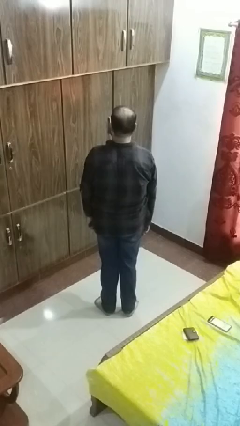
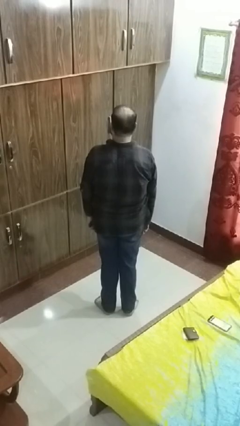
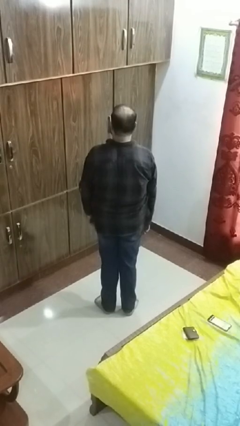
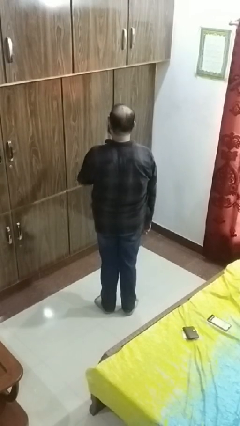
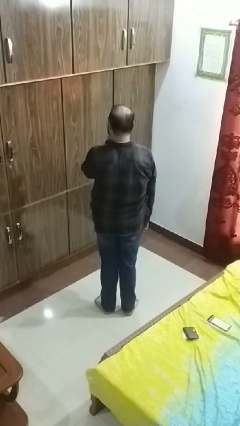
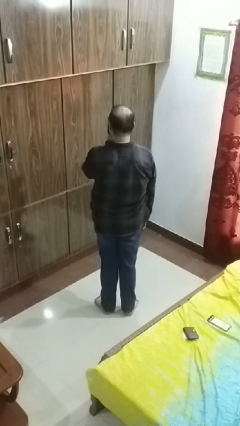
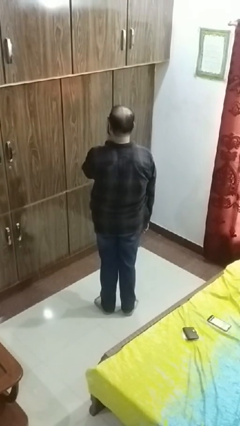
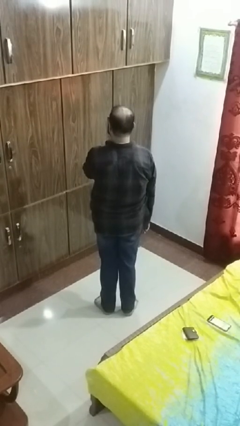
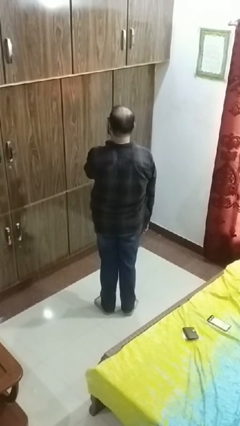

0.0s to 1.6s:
person gestures be quiet

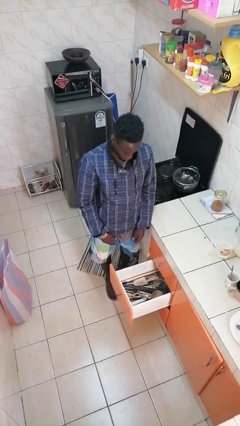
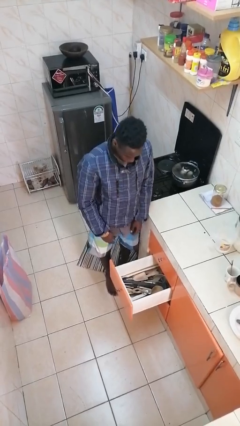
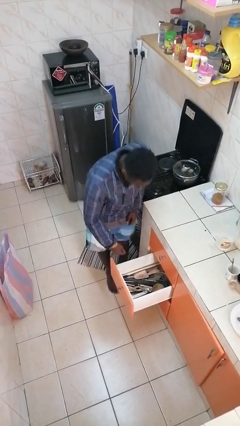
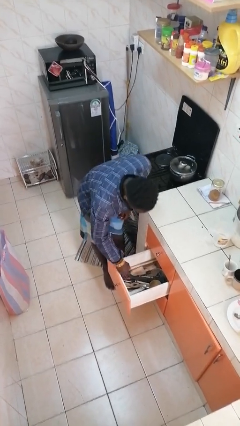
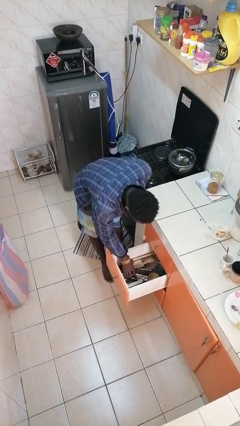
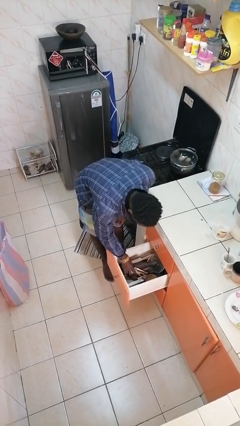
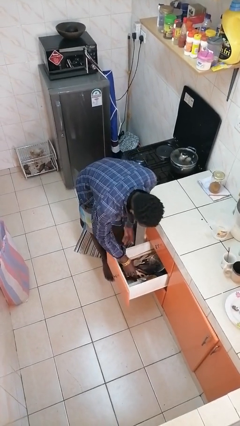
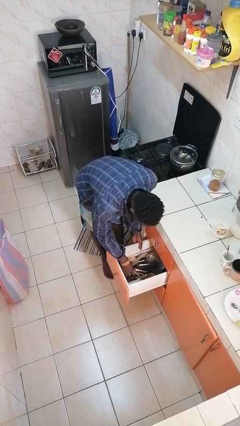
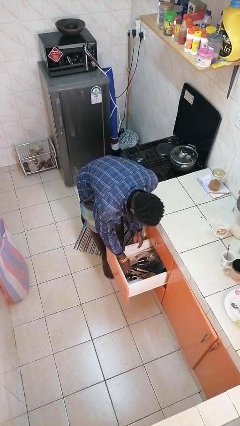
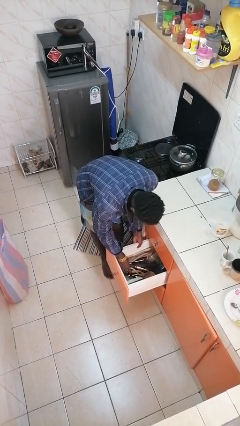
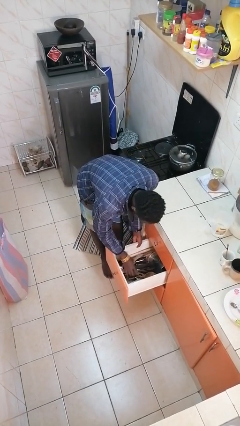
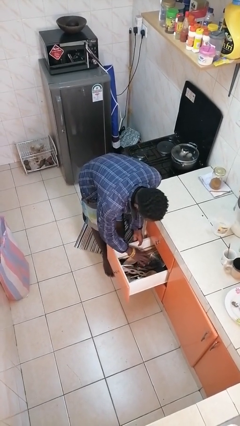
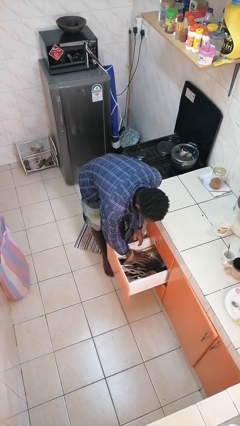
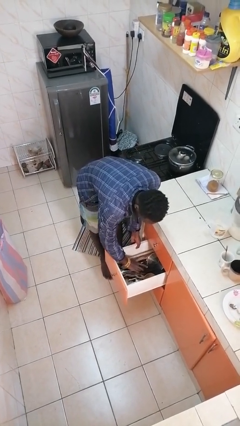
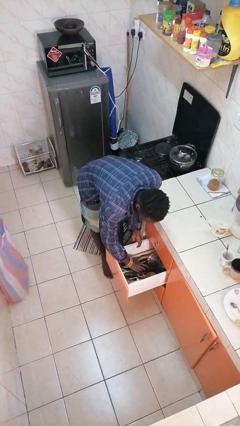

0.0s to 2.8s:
person searches in kitchen drawer

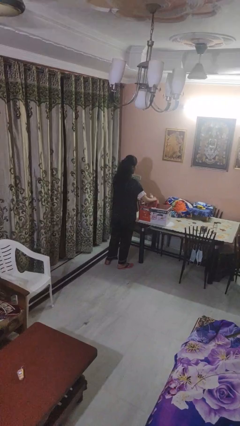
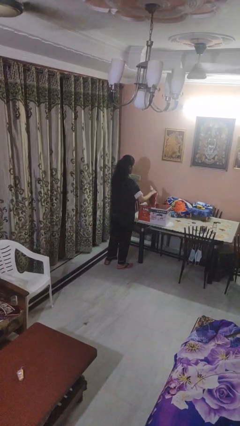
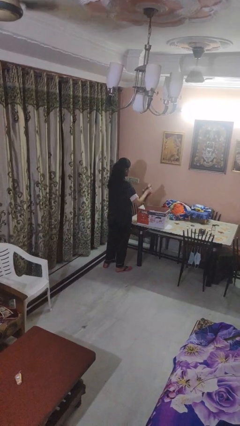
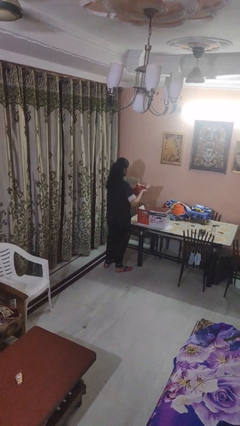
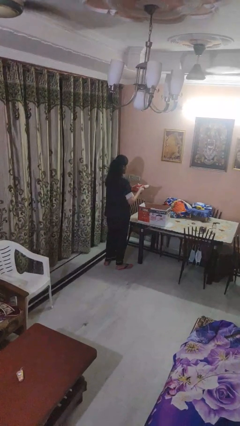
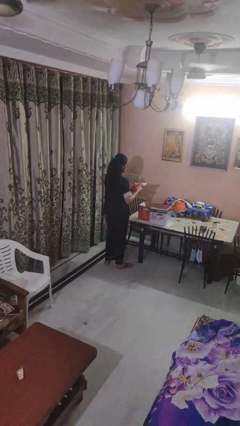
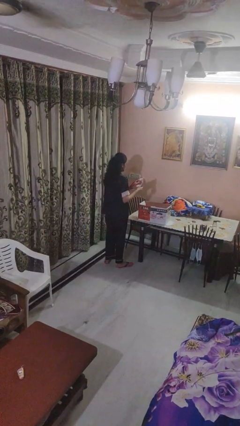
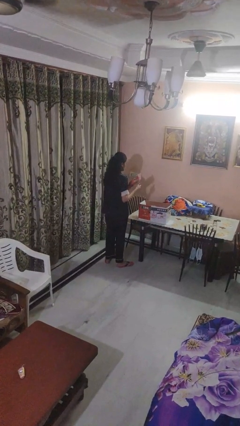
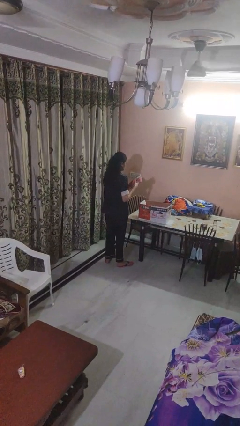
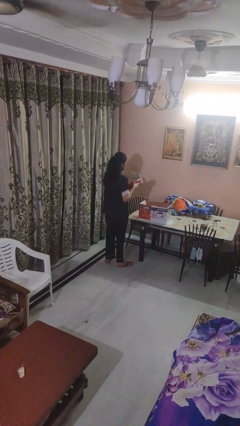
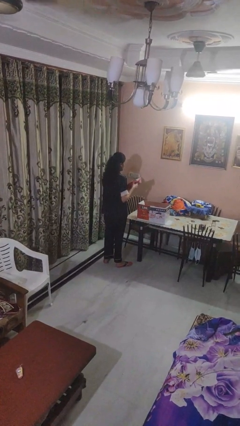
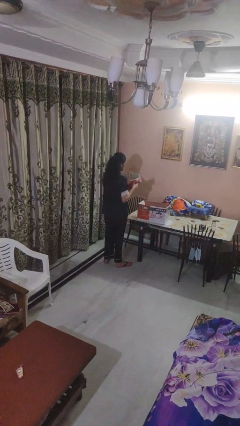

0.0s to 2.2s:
person takes object from box

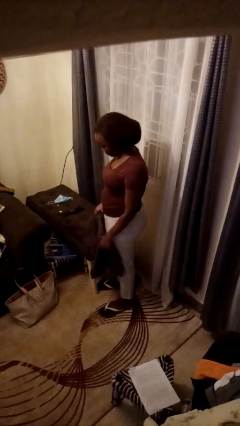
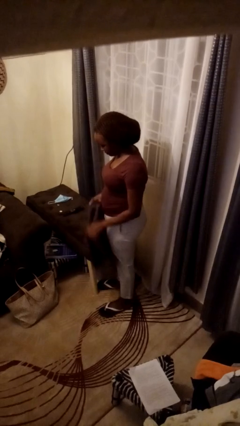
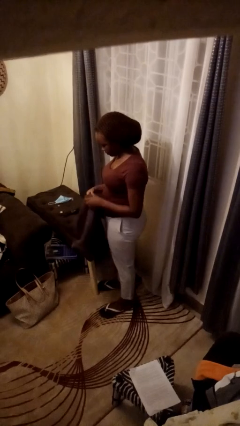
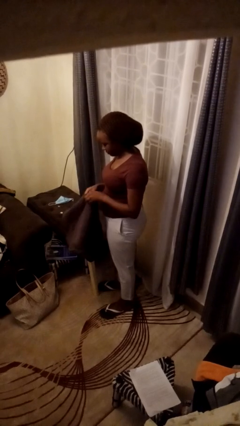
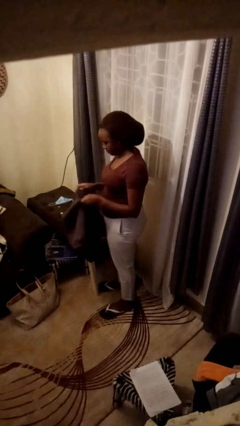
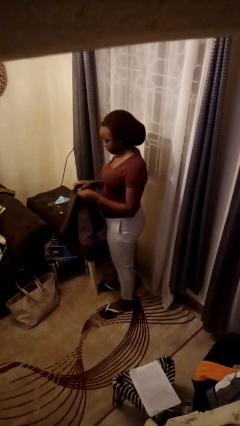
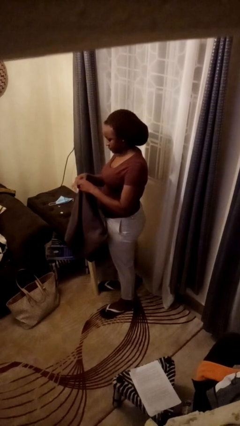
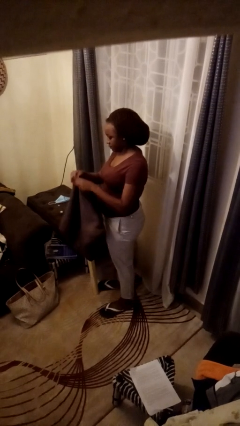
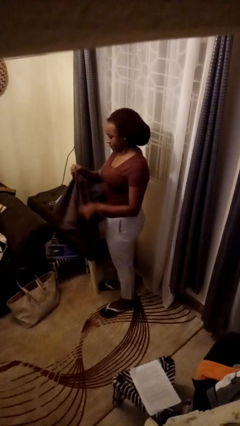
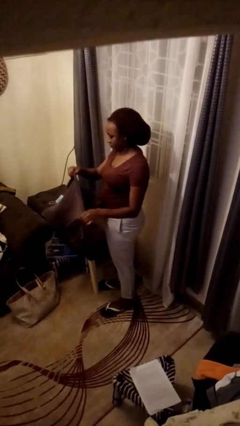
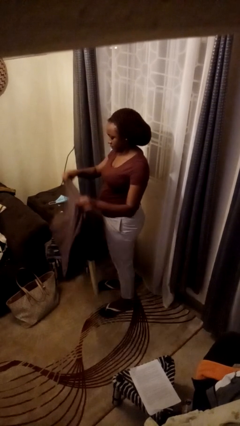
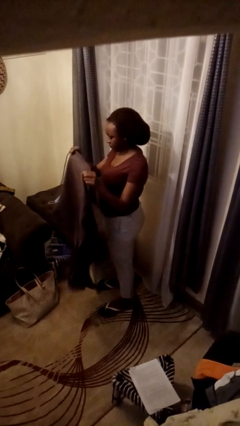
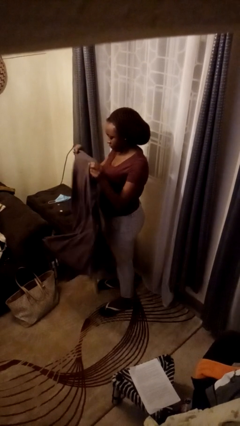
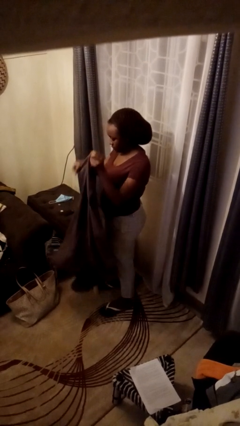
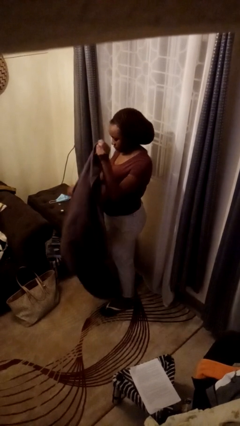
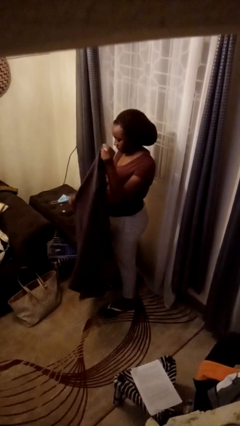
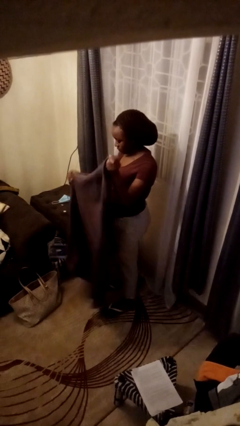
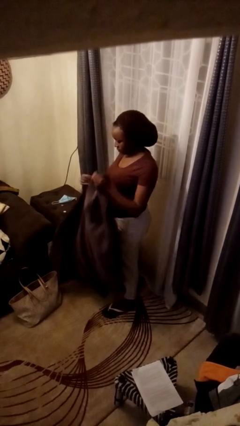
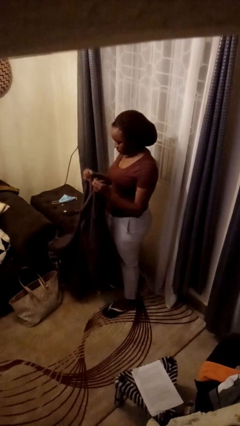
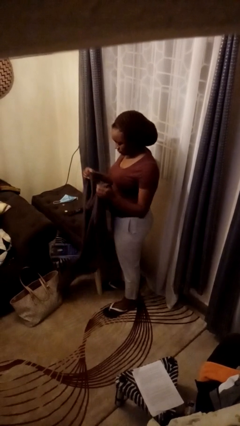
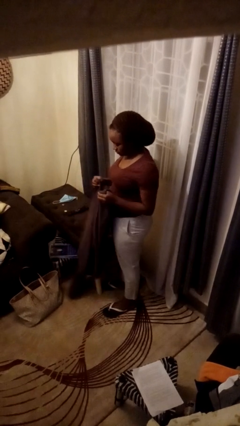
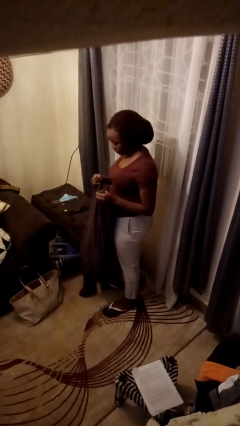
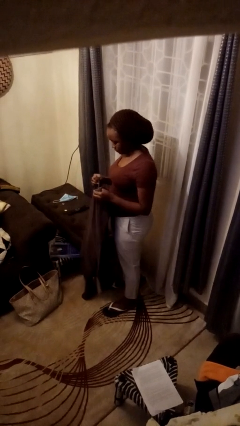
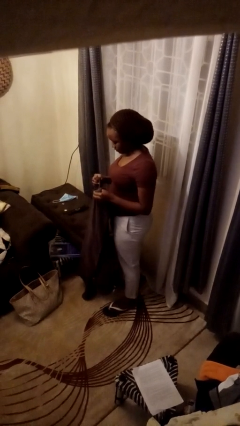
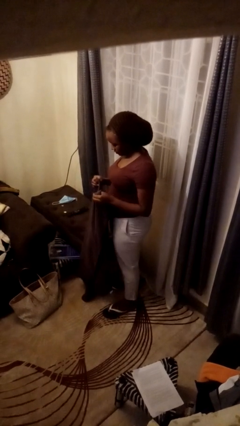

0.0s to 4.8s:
person unfolds blanket

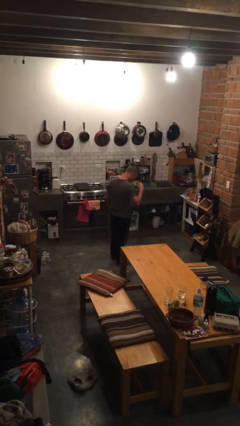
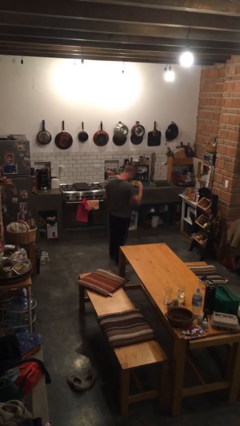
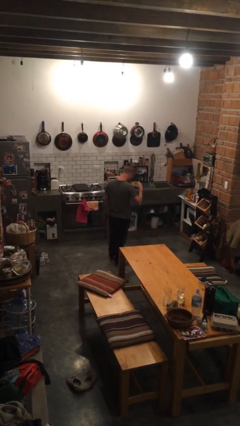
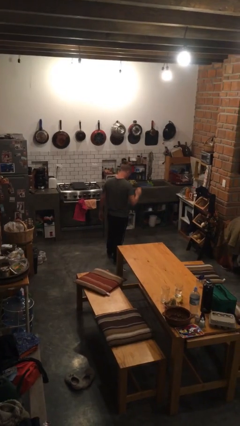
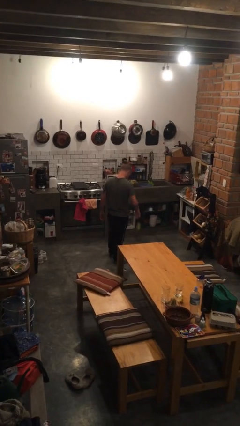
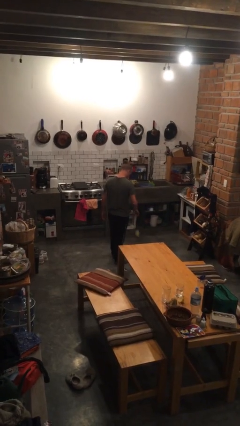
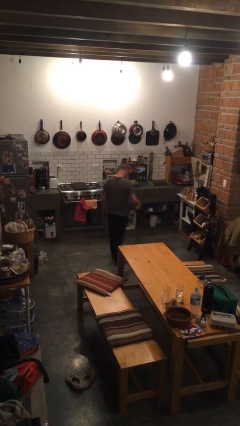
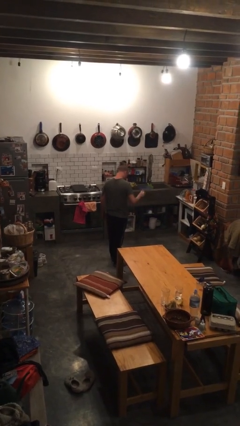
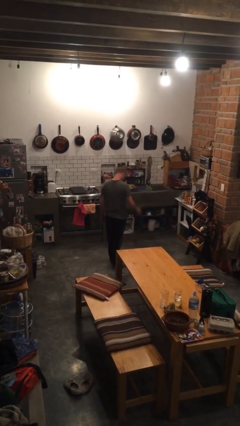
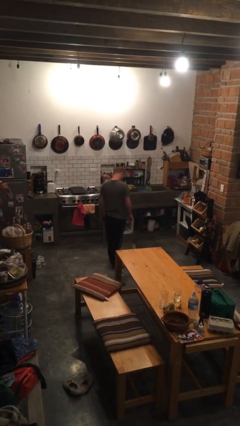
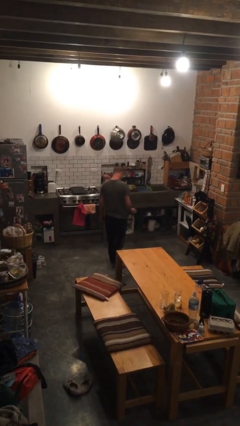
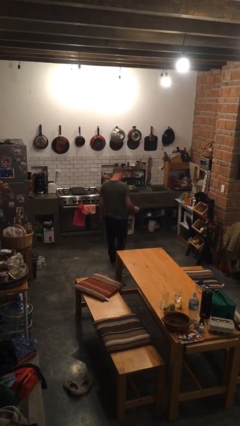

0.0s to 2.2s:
person bounces ball on floor

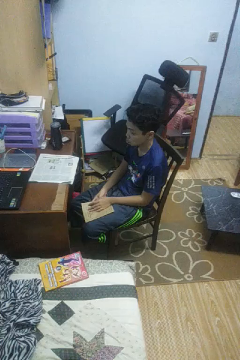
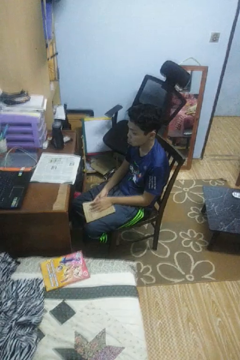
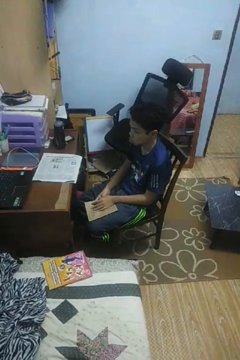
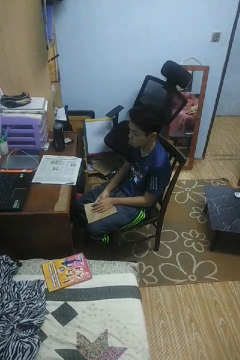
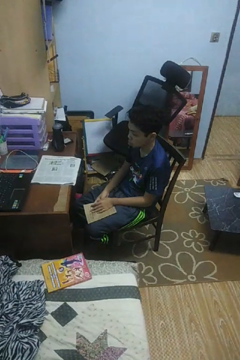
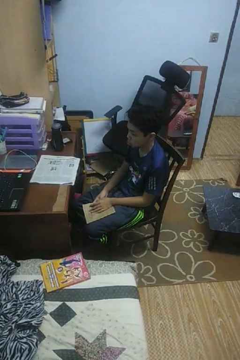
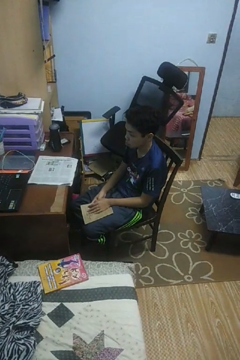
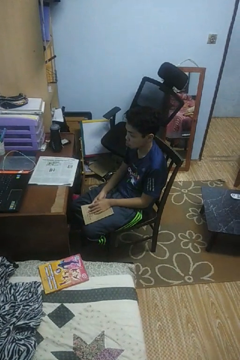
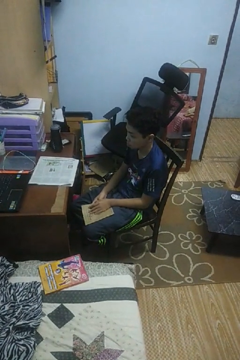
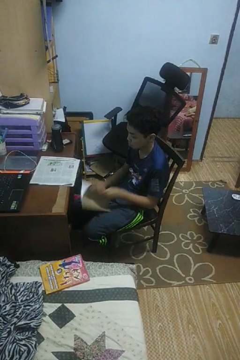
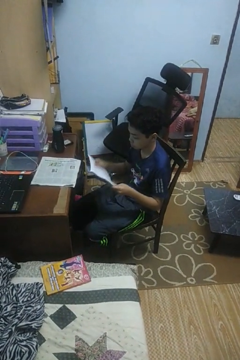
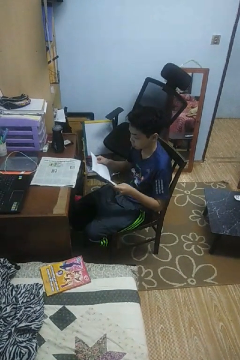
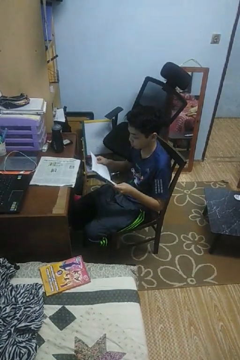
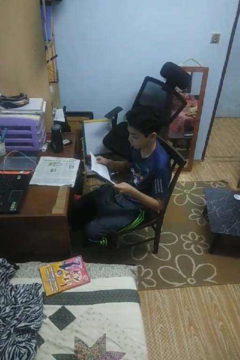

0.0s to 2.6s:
person reads book

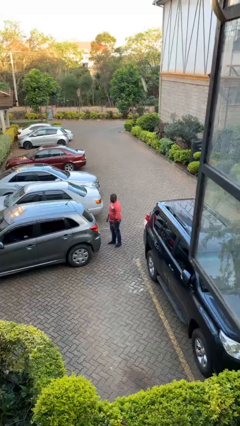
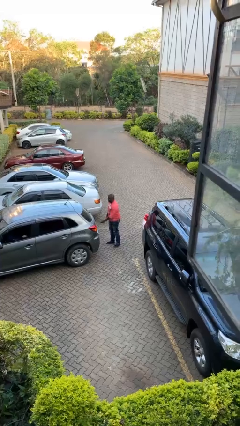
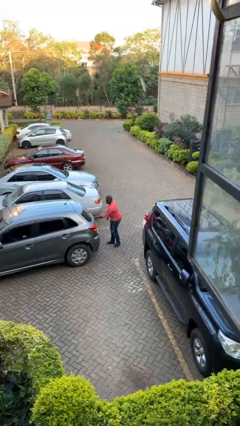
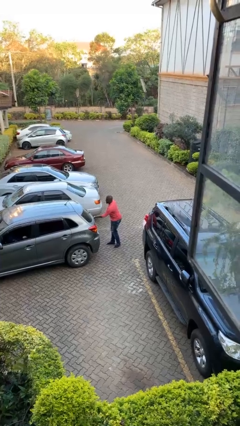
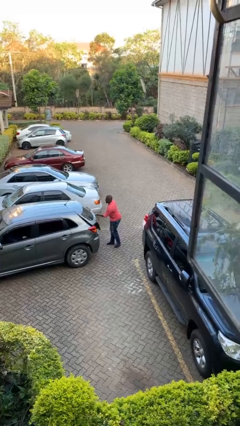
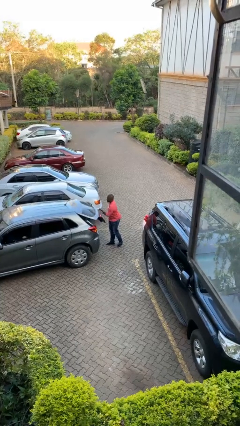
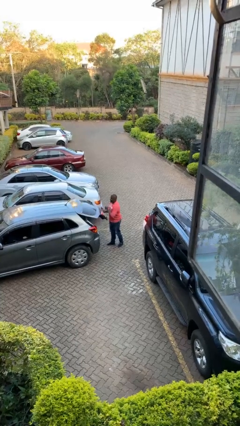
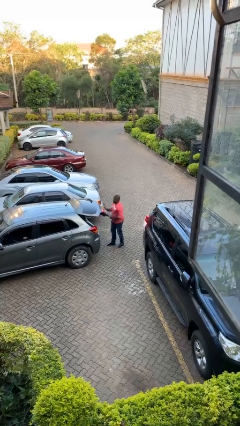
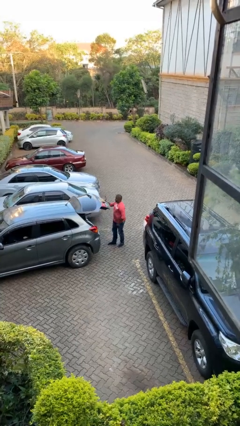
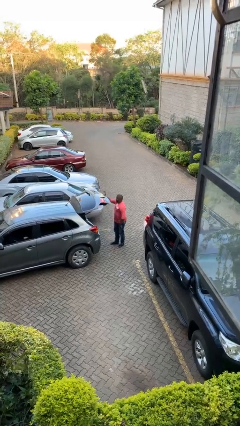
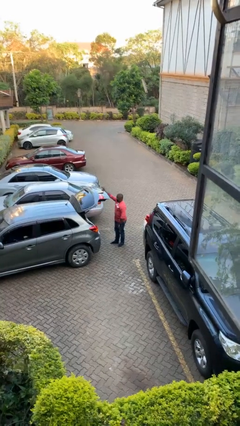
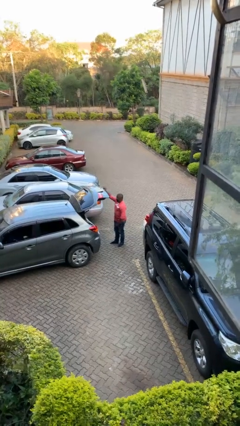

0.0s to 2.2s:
person opens car trunk
